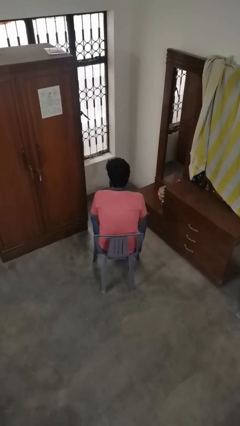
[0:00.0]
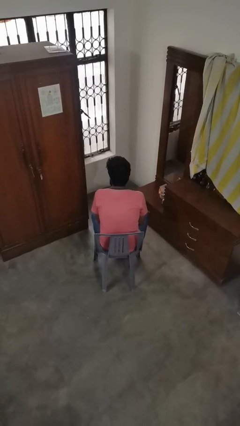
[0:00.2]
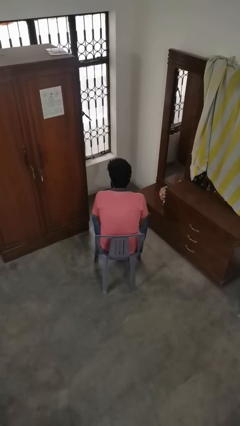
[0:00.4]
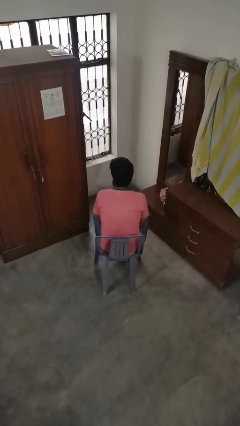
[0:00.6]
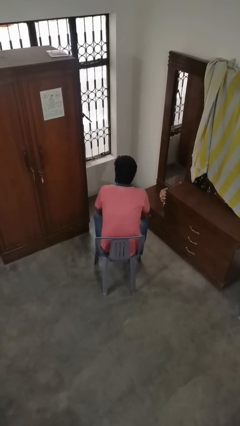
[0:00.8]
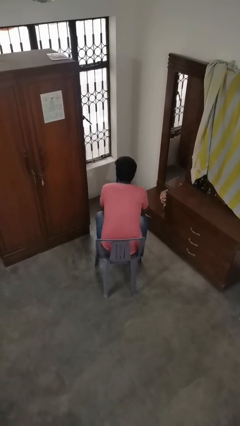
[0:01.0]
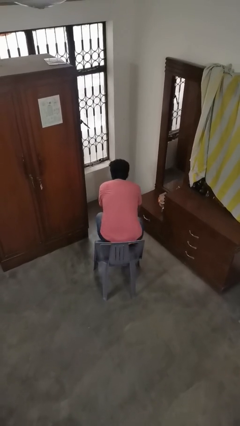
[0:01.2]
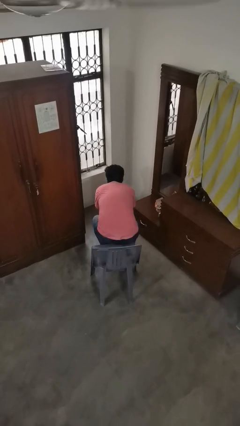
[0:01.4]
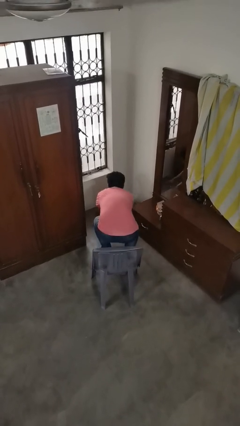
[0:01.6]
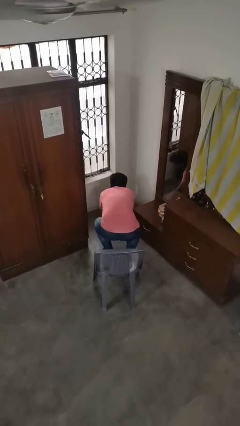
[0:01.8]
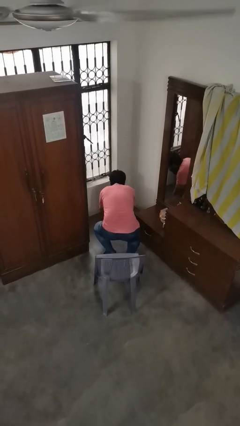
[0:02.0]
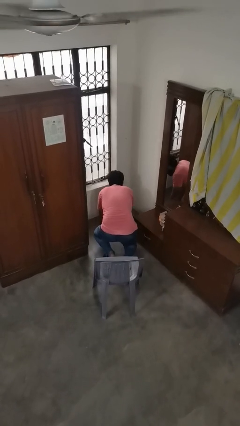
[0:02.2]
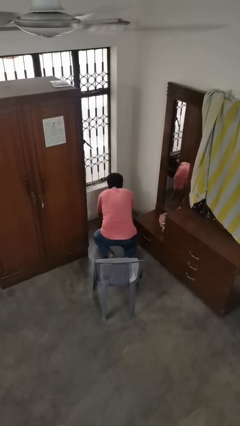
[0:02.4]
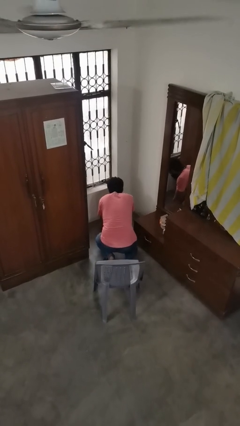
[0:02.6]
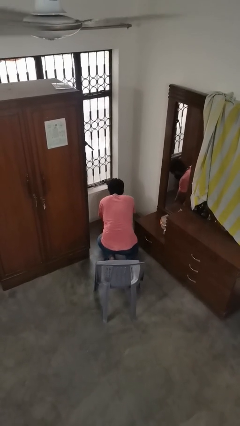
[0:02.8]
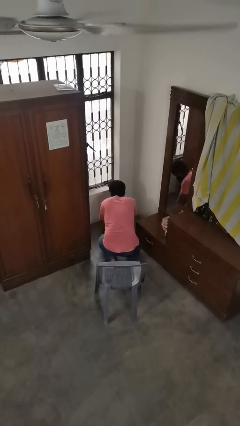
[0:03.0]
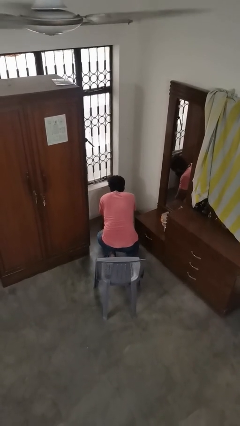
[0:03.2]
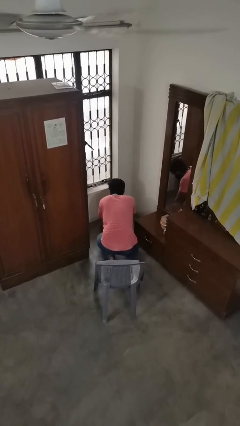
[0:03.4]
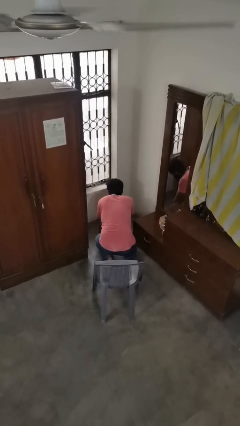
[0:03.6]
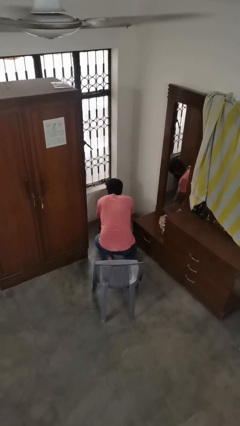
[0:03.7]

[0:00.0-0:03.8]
person falls from chair

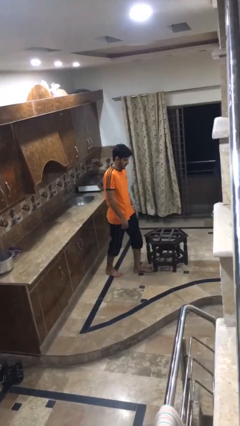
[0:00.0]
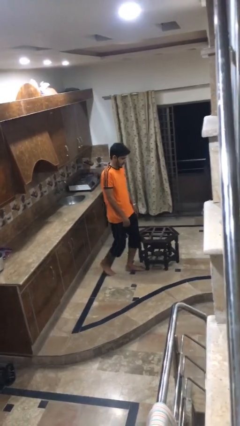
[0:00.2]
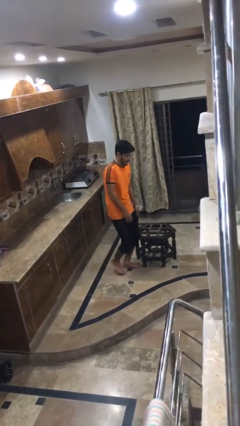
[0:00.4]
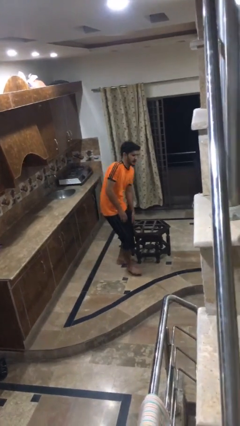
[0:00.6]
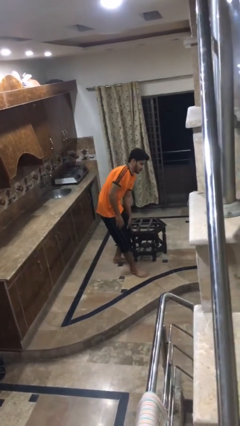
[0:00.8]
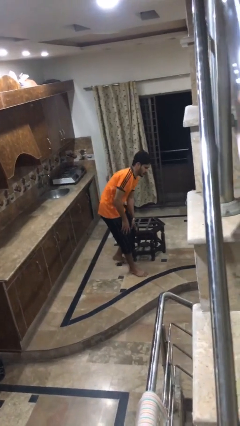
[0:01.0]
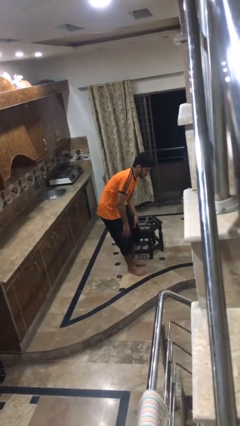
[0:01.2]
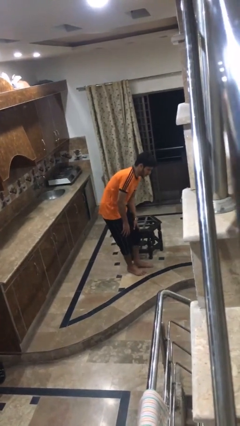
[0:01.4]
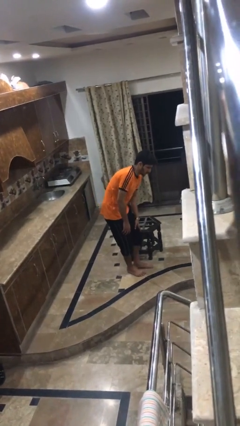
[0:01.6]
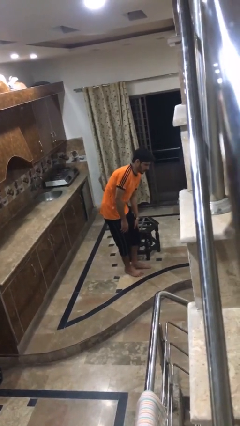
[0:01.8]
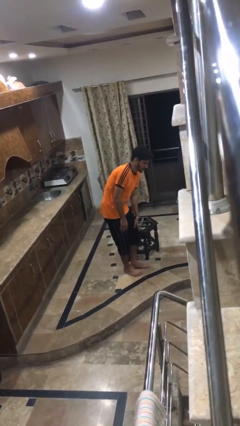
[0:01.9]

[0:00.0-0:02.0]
person bumps into table

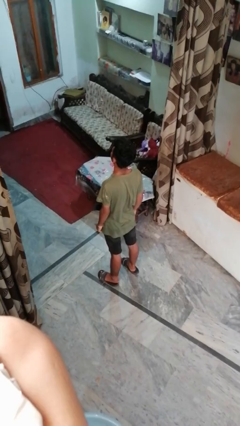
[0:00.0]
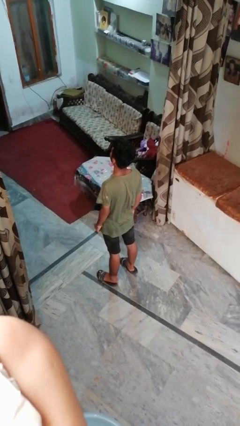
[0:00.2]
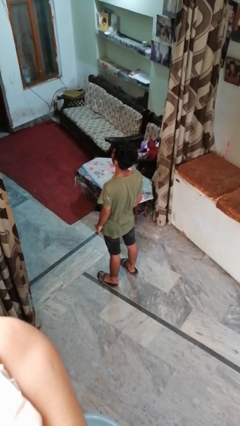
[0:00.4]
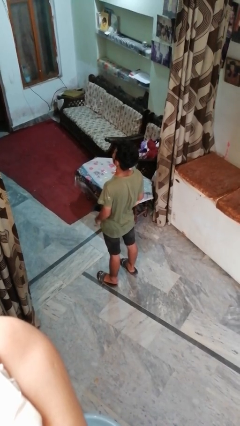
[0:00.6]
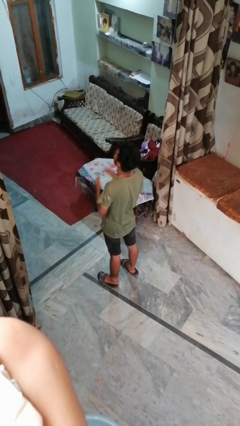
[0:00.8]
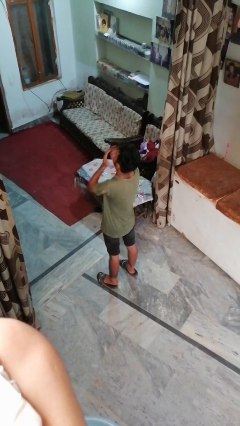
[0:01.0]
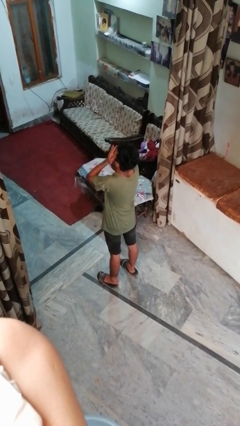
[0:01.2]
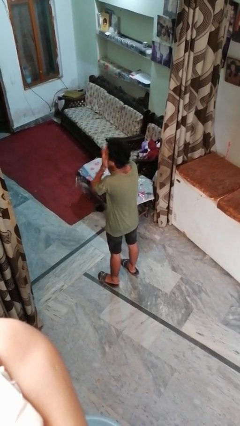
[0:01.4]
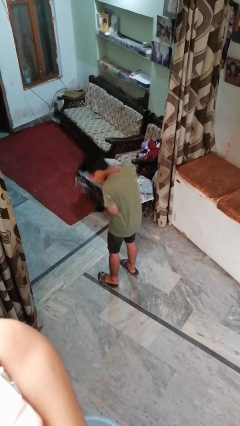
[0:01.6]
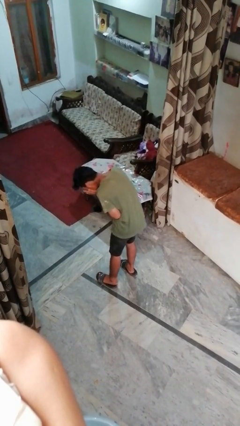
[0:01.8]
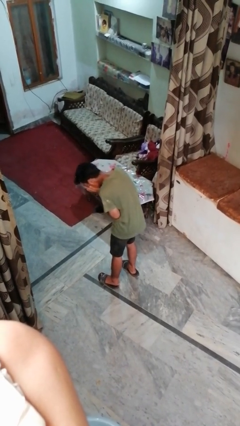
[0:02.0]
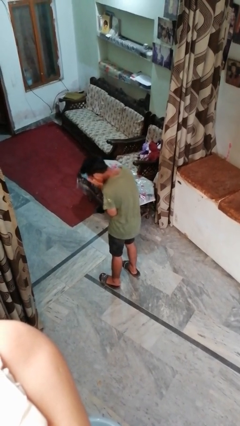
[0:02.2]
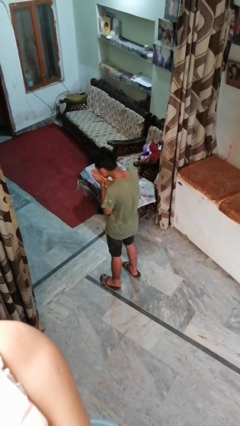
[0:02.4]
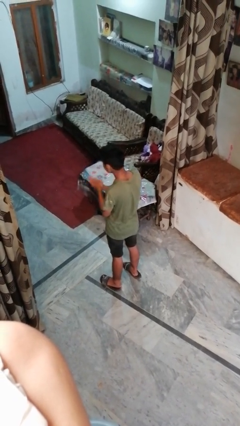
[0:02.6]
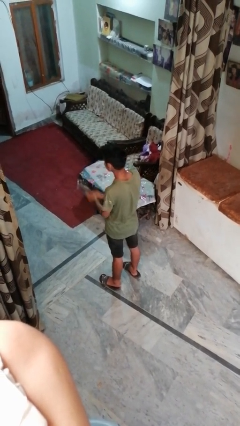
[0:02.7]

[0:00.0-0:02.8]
person sneezes into hand

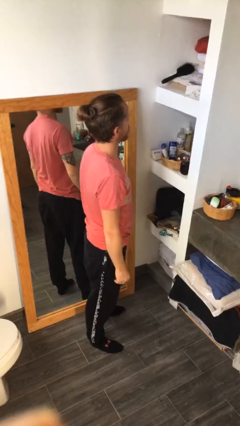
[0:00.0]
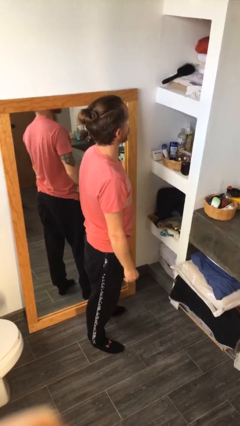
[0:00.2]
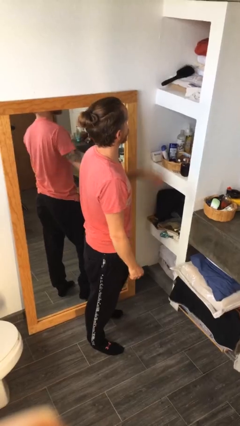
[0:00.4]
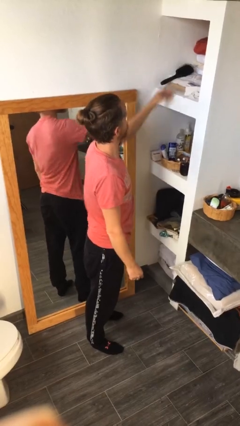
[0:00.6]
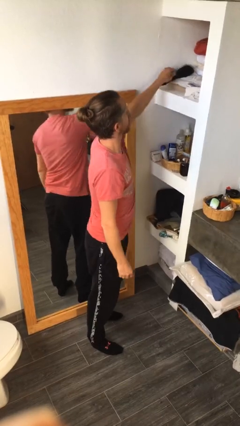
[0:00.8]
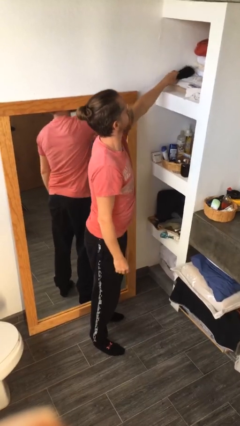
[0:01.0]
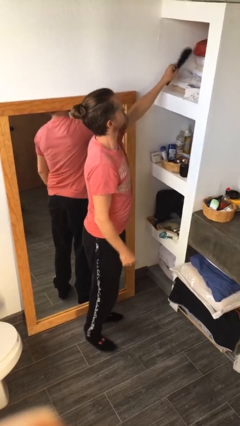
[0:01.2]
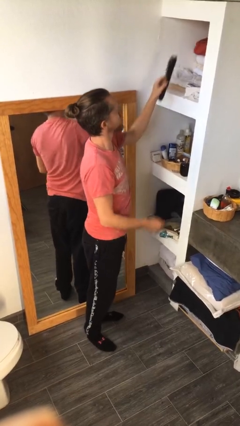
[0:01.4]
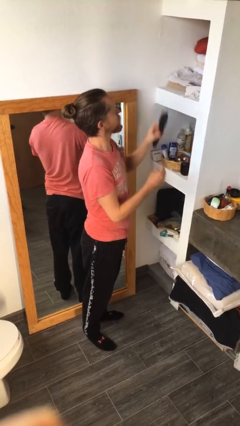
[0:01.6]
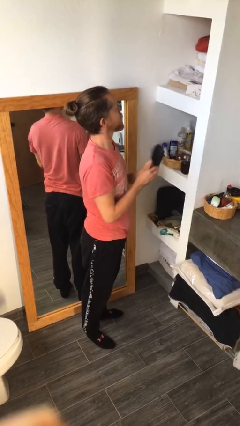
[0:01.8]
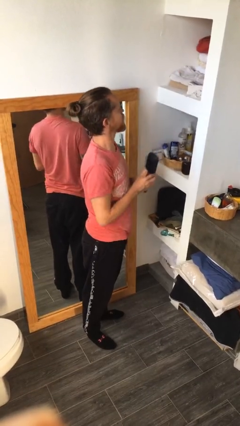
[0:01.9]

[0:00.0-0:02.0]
person picks up object from countertop

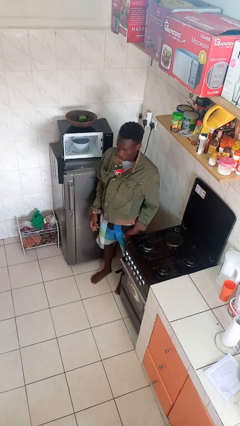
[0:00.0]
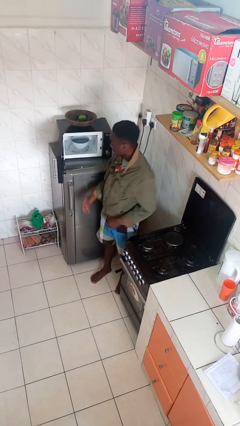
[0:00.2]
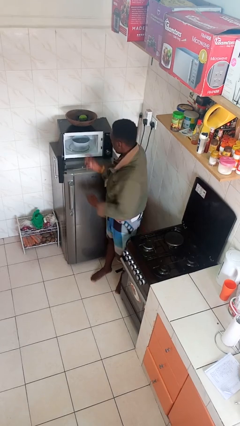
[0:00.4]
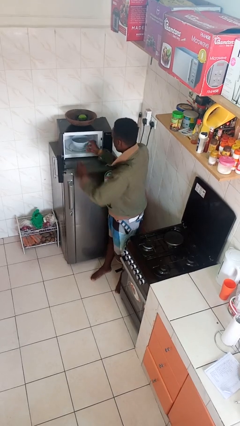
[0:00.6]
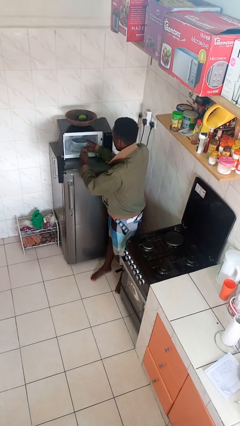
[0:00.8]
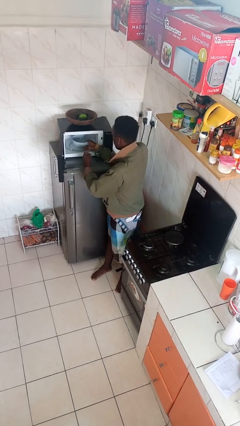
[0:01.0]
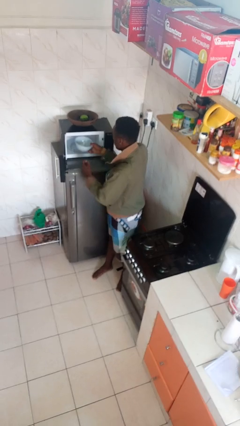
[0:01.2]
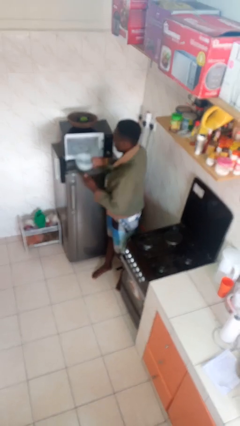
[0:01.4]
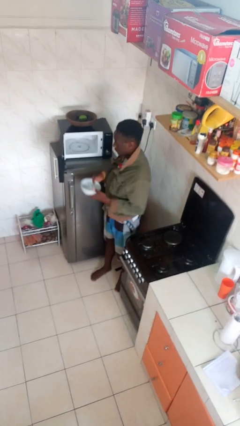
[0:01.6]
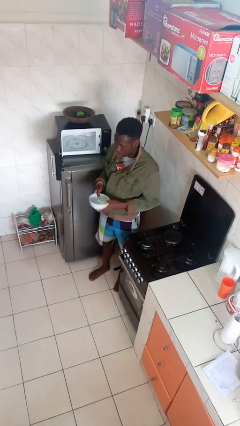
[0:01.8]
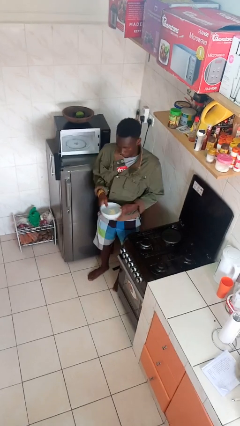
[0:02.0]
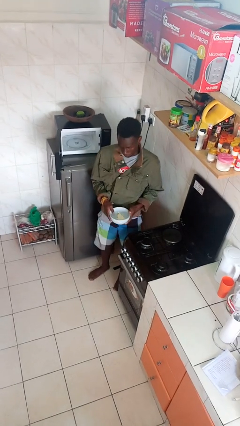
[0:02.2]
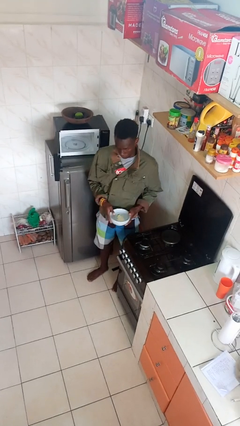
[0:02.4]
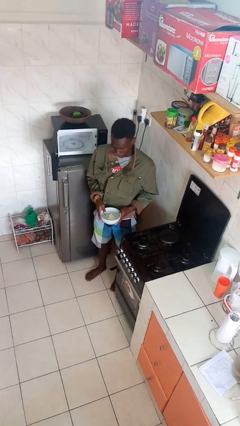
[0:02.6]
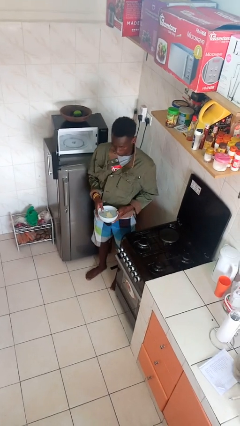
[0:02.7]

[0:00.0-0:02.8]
person takes object from microwave

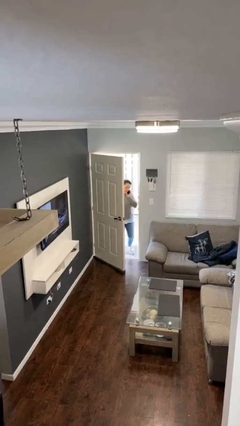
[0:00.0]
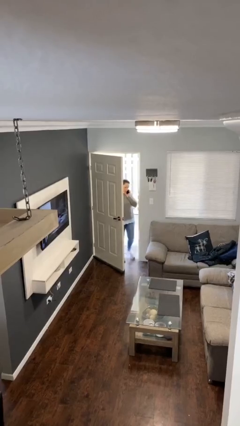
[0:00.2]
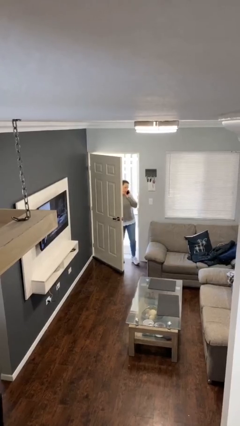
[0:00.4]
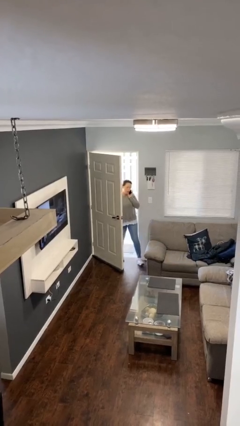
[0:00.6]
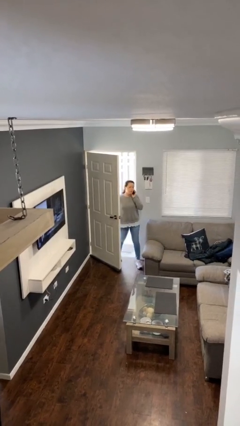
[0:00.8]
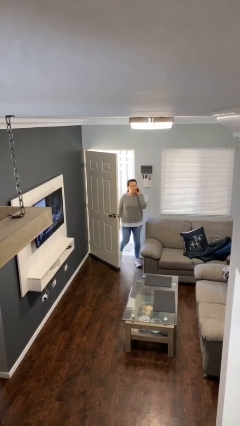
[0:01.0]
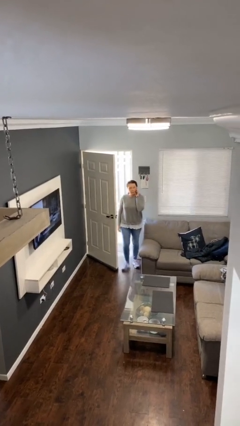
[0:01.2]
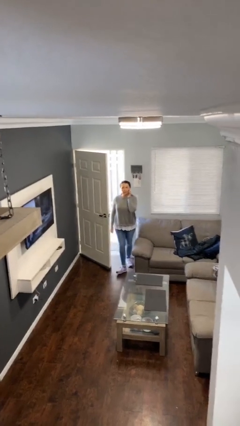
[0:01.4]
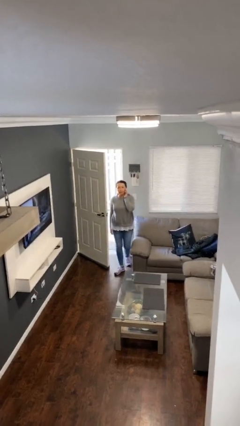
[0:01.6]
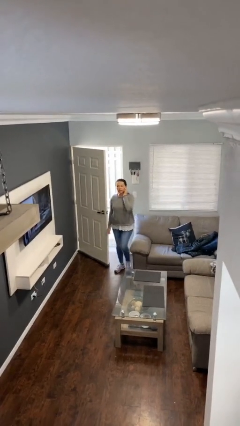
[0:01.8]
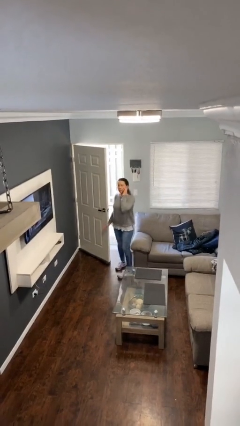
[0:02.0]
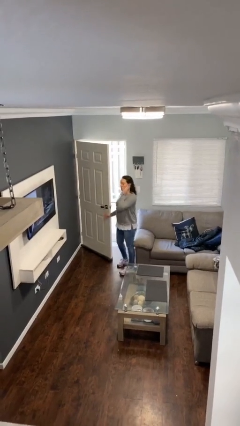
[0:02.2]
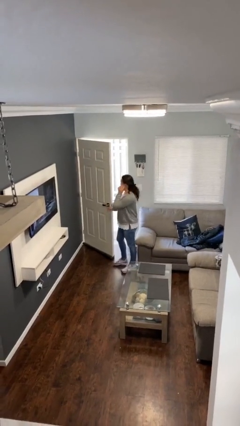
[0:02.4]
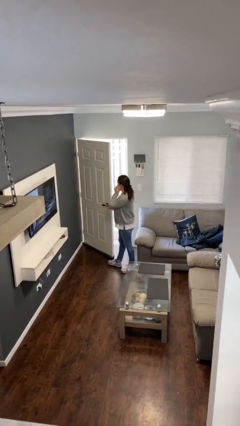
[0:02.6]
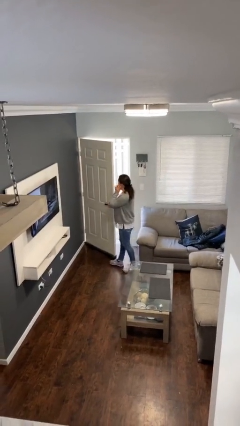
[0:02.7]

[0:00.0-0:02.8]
person enters scene through structure

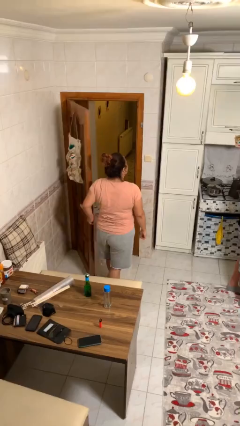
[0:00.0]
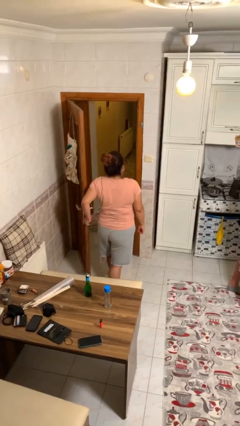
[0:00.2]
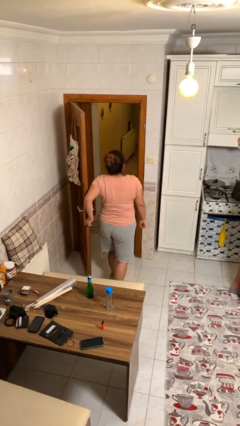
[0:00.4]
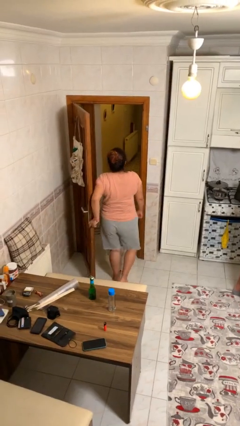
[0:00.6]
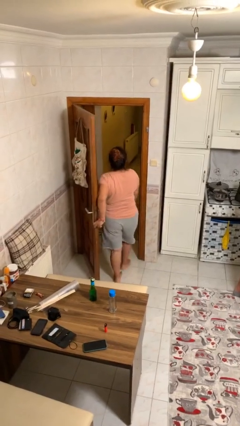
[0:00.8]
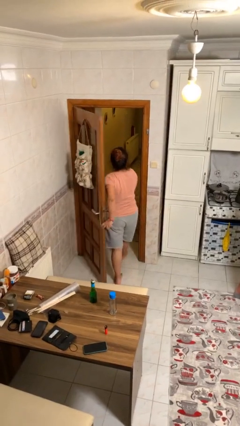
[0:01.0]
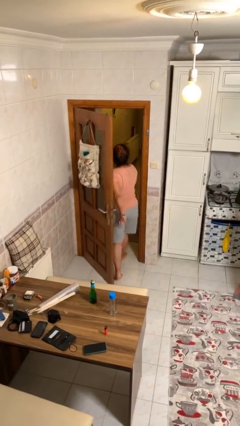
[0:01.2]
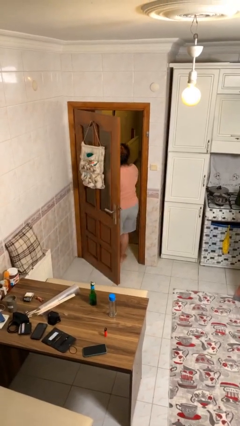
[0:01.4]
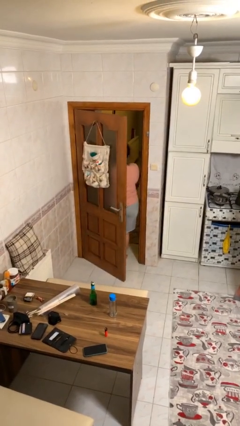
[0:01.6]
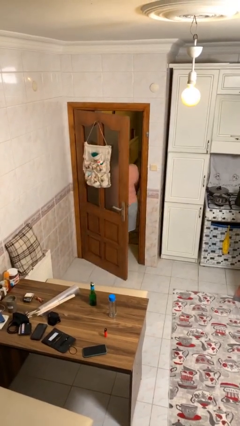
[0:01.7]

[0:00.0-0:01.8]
person exits scene through structure
